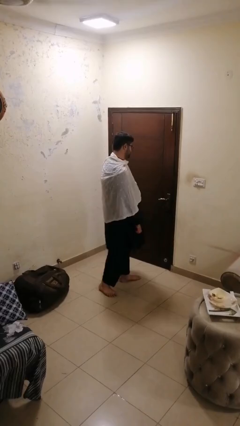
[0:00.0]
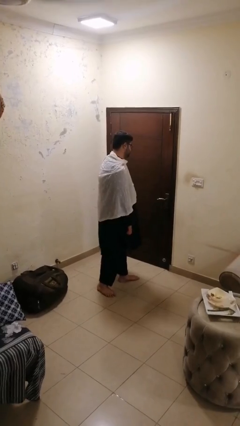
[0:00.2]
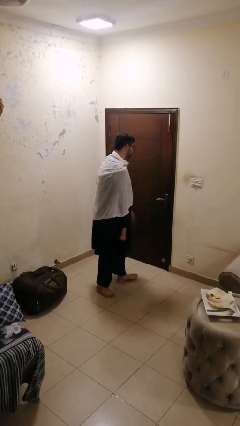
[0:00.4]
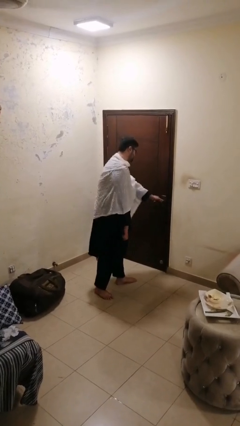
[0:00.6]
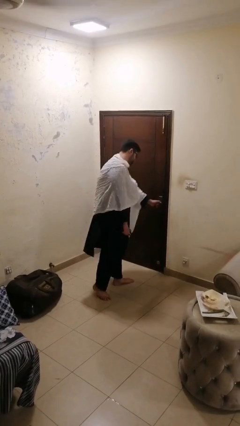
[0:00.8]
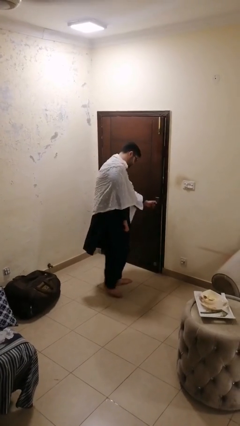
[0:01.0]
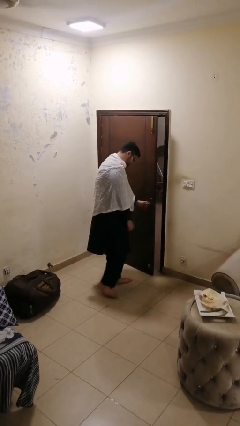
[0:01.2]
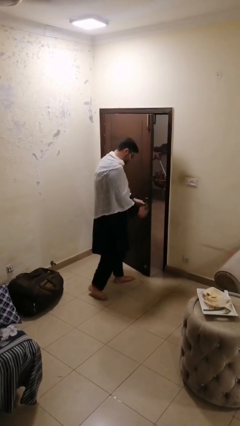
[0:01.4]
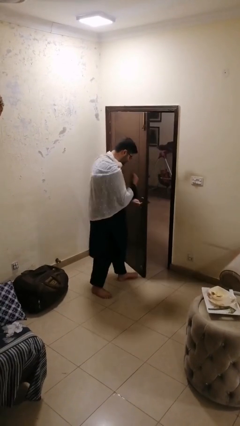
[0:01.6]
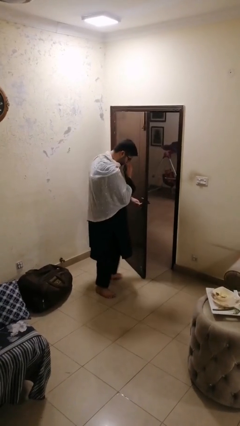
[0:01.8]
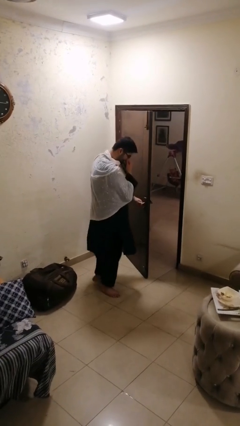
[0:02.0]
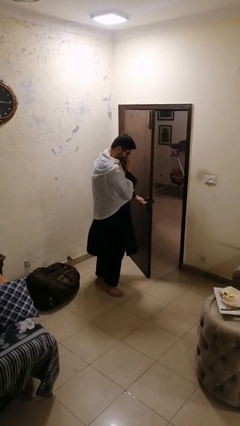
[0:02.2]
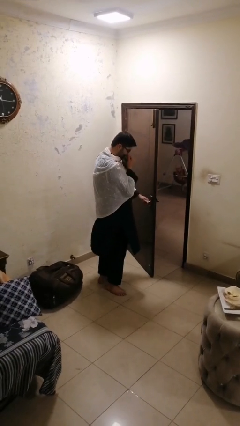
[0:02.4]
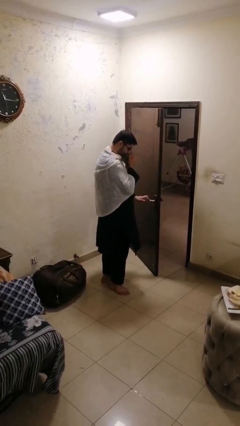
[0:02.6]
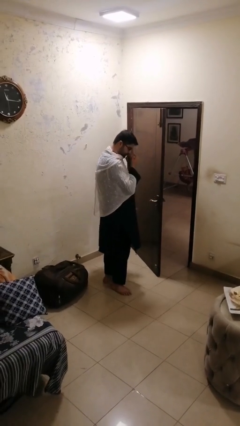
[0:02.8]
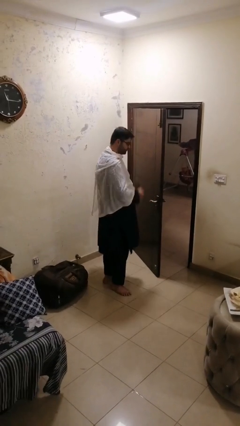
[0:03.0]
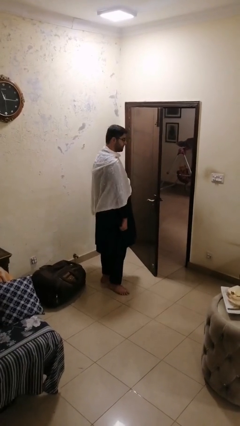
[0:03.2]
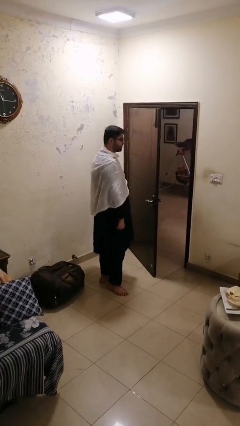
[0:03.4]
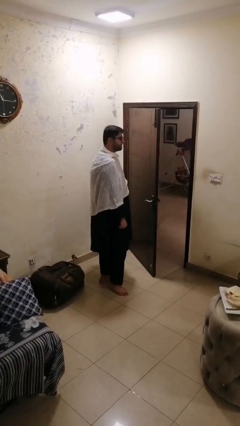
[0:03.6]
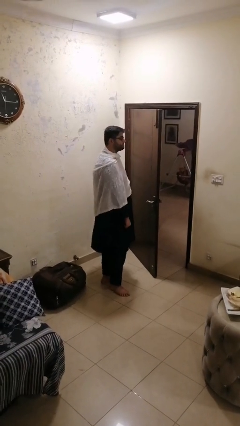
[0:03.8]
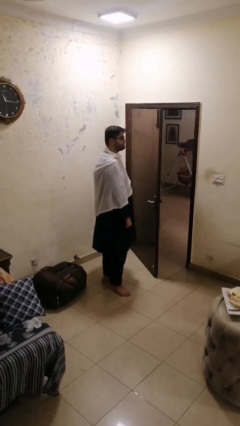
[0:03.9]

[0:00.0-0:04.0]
person opens facility door

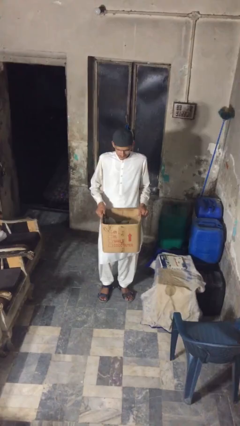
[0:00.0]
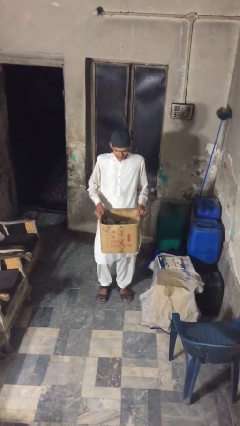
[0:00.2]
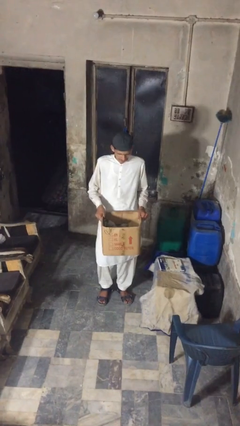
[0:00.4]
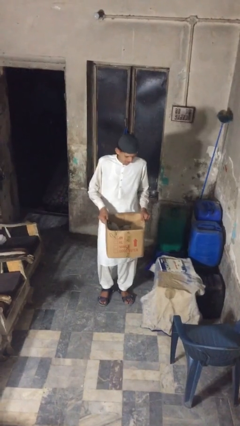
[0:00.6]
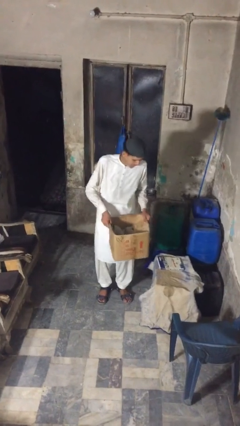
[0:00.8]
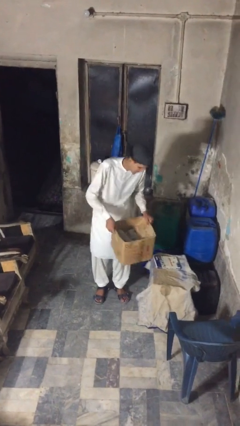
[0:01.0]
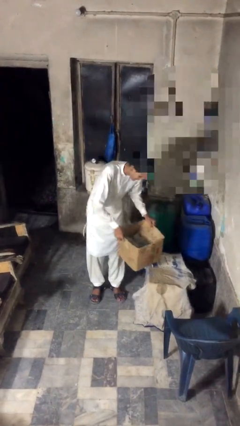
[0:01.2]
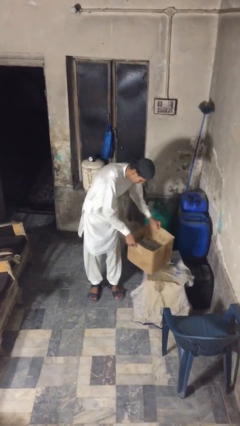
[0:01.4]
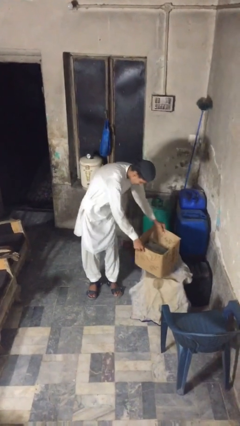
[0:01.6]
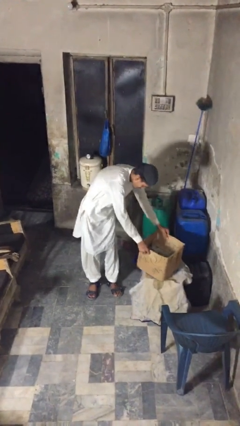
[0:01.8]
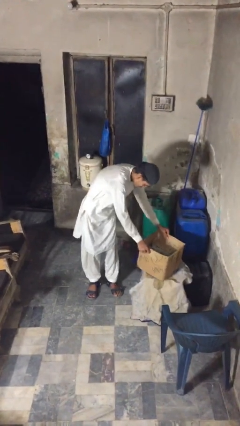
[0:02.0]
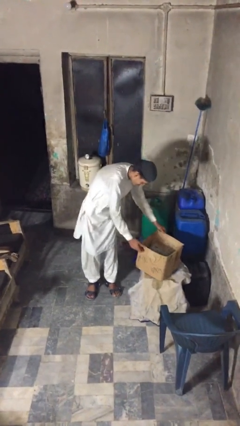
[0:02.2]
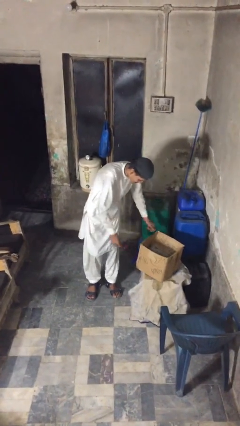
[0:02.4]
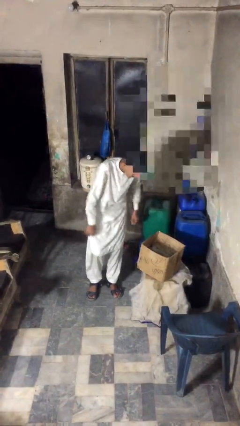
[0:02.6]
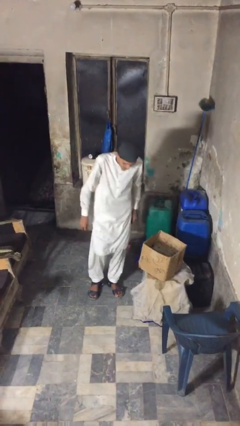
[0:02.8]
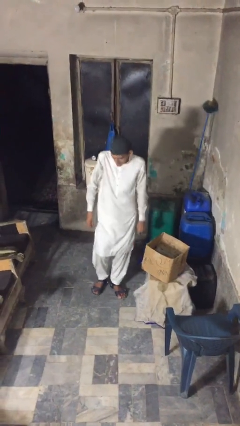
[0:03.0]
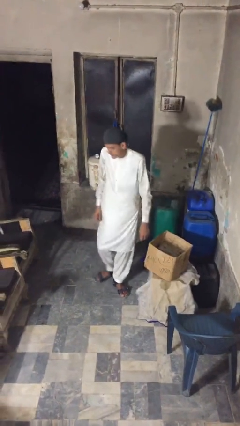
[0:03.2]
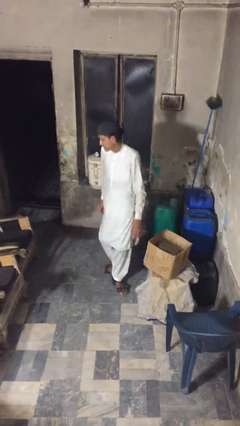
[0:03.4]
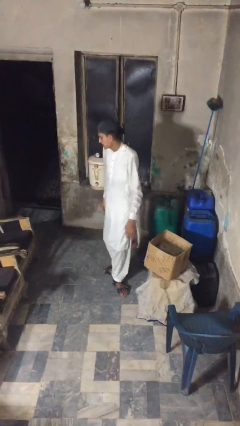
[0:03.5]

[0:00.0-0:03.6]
person puts down object on table

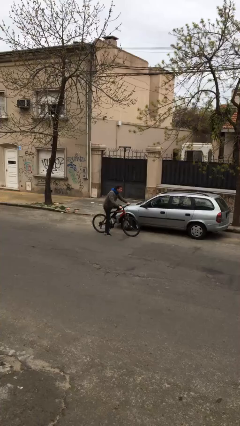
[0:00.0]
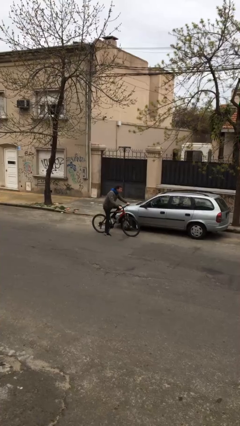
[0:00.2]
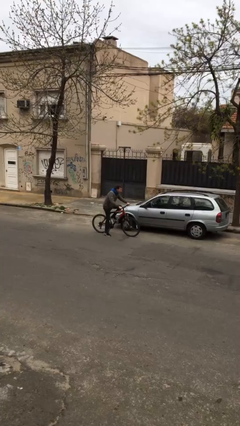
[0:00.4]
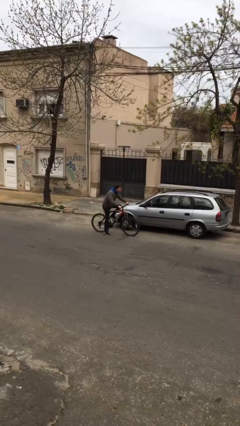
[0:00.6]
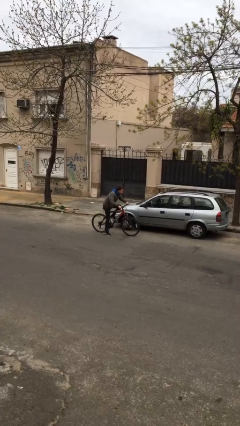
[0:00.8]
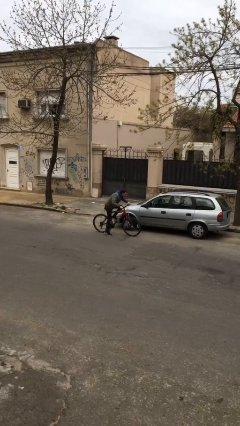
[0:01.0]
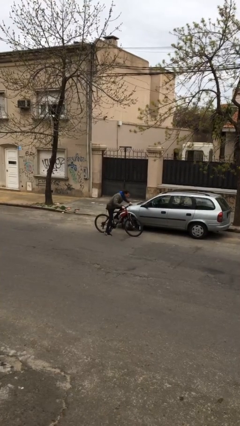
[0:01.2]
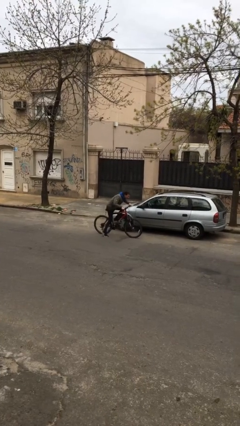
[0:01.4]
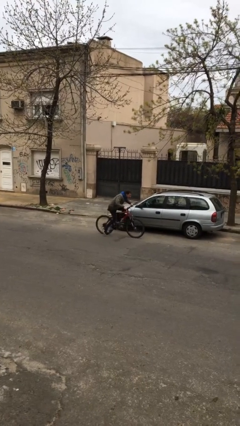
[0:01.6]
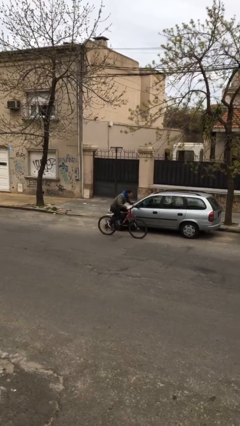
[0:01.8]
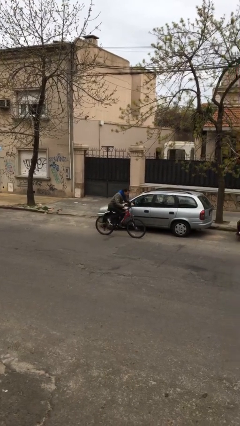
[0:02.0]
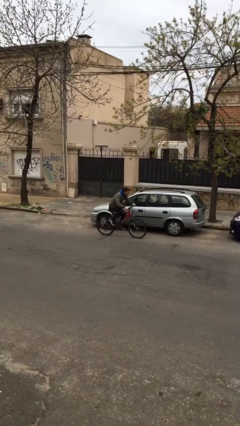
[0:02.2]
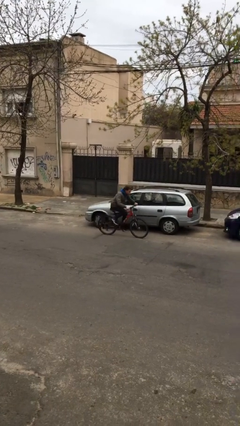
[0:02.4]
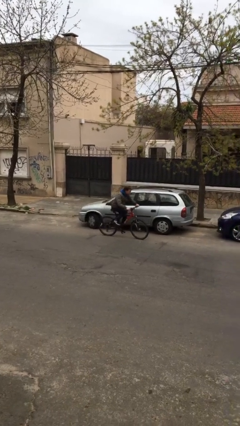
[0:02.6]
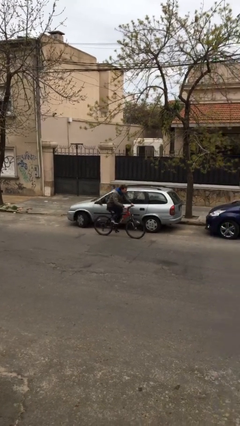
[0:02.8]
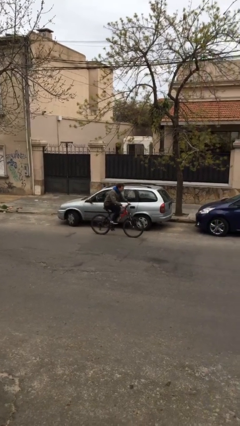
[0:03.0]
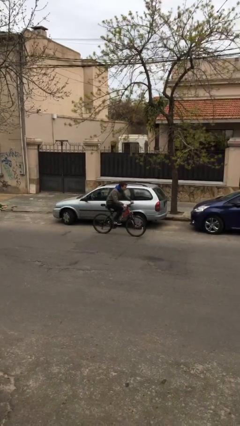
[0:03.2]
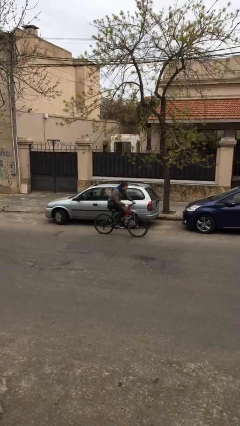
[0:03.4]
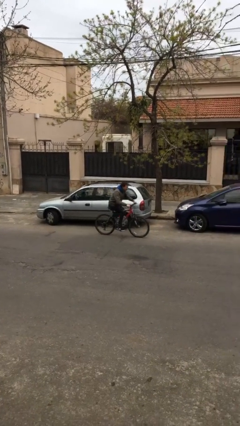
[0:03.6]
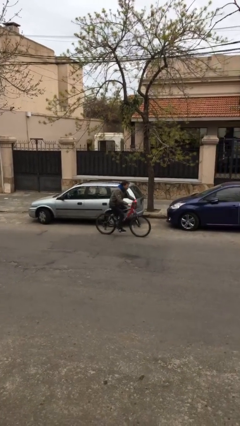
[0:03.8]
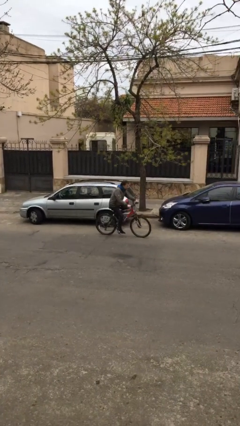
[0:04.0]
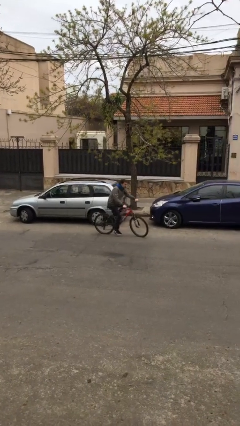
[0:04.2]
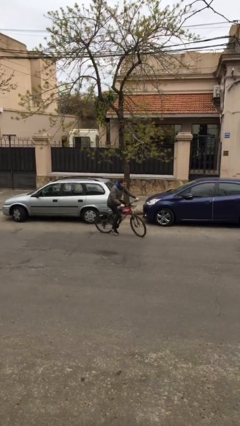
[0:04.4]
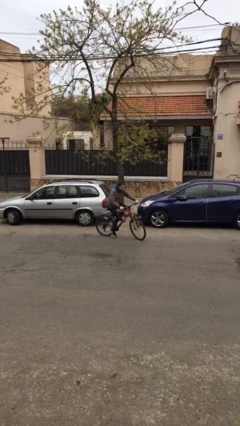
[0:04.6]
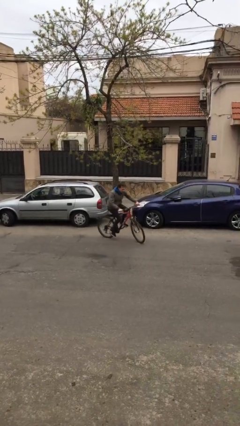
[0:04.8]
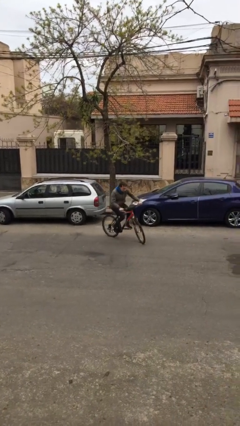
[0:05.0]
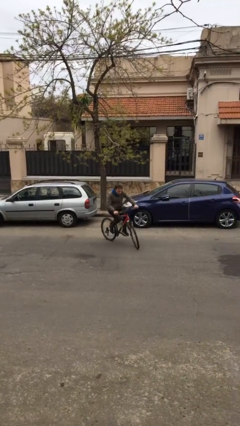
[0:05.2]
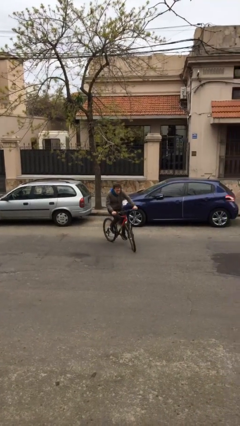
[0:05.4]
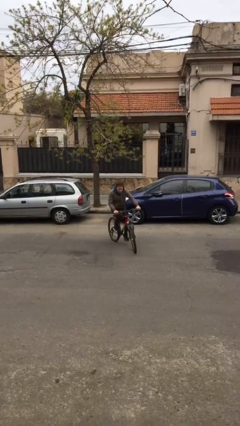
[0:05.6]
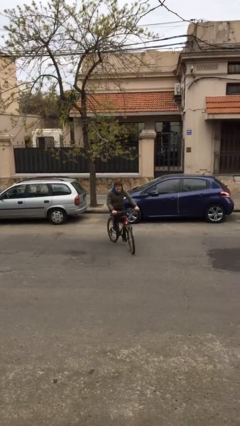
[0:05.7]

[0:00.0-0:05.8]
person rides bicycle

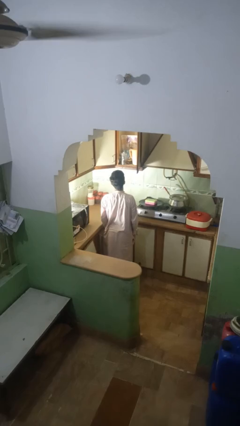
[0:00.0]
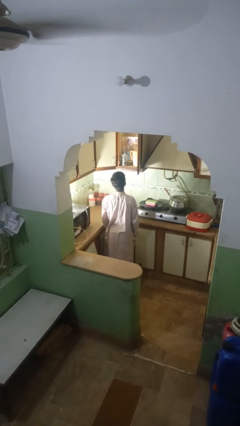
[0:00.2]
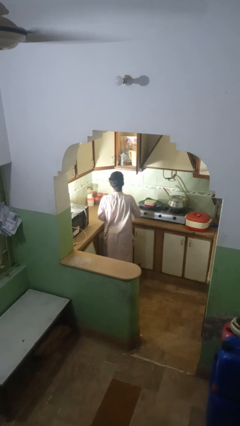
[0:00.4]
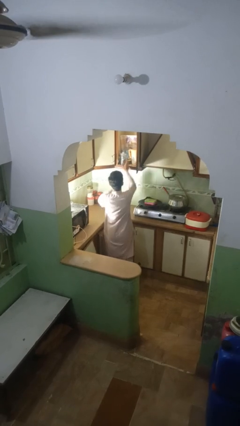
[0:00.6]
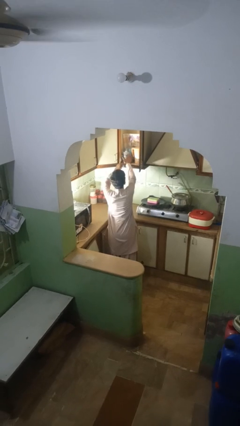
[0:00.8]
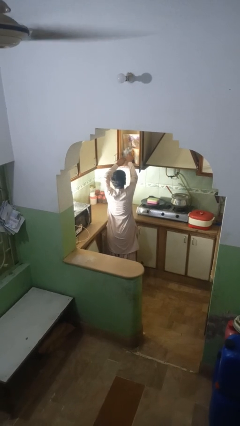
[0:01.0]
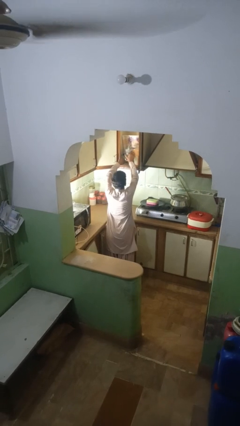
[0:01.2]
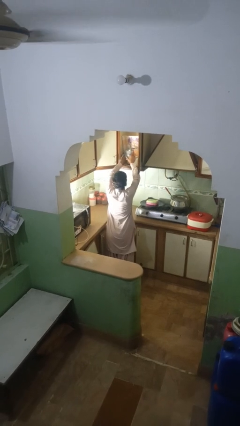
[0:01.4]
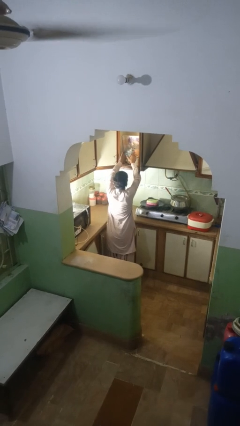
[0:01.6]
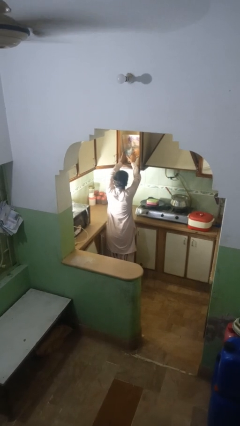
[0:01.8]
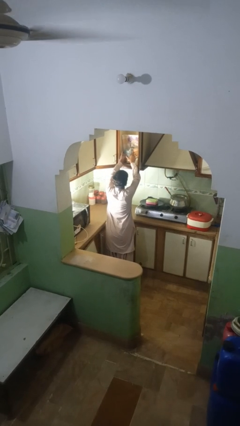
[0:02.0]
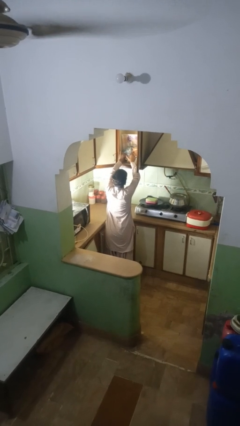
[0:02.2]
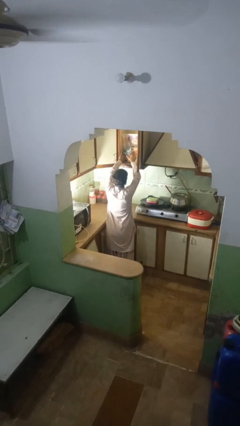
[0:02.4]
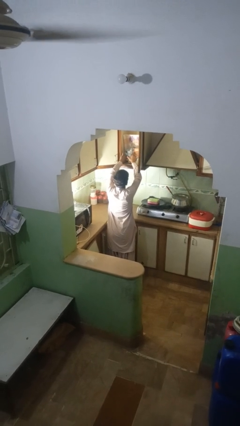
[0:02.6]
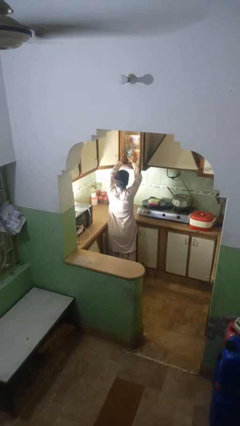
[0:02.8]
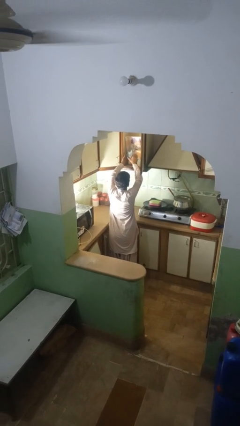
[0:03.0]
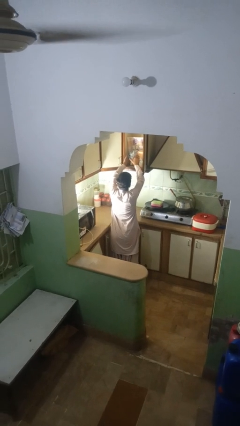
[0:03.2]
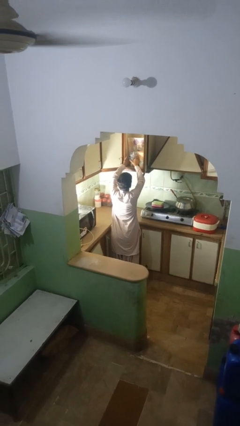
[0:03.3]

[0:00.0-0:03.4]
person searches in kitchen drawer

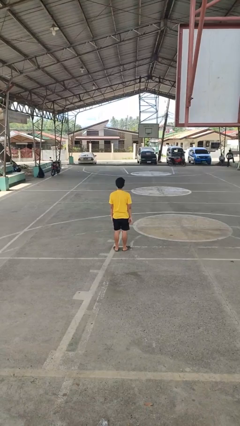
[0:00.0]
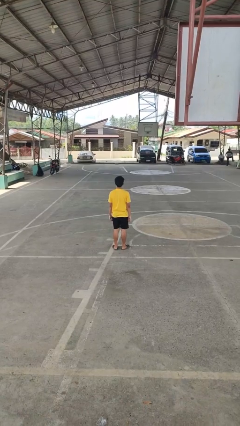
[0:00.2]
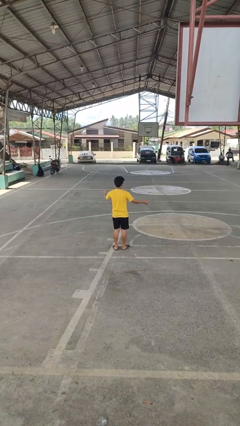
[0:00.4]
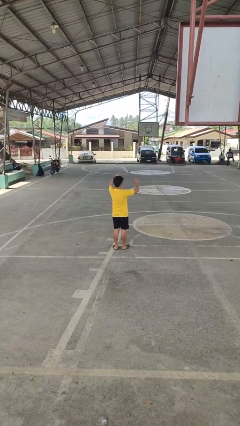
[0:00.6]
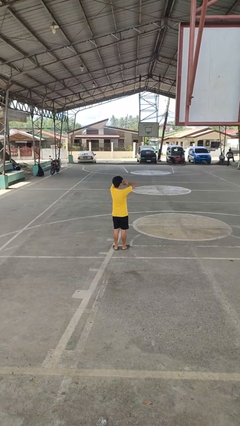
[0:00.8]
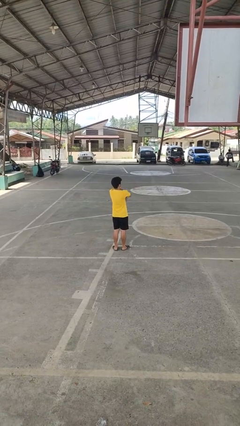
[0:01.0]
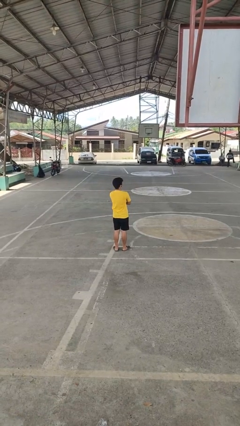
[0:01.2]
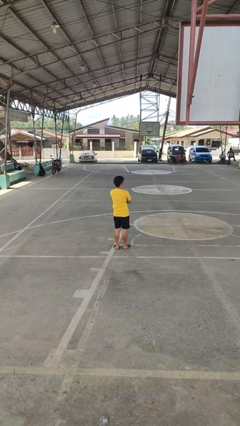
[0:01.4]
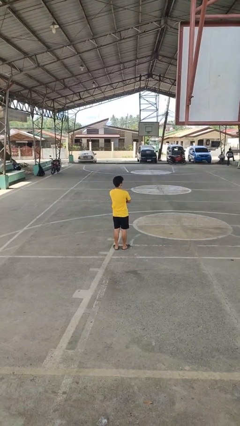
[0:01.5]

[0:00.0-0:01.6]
person crosses arms
